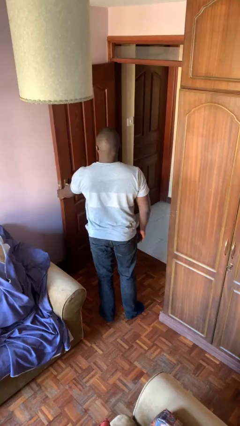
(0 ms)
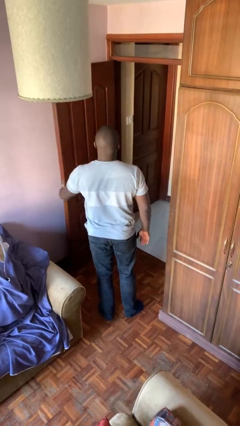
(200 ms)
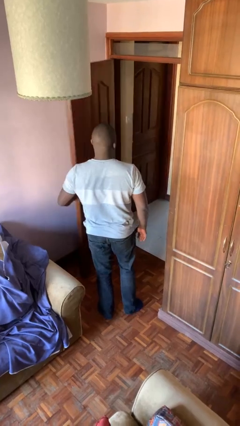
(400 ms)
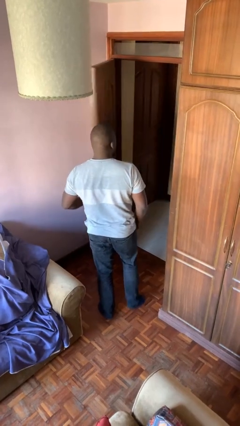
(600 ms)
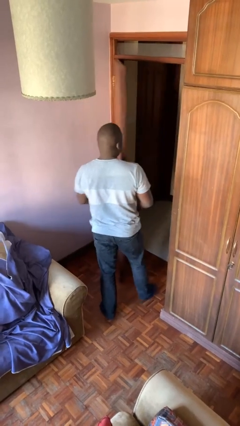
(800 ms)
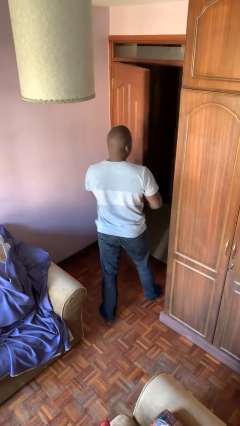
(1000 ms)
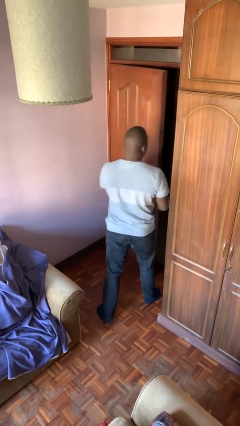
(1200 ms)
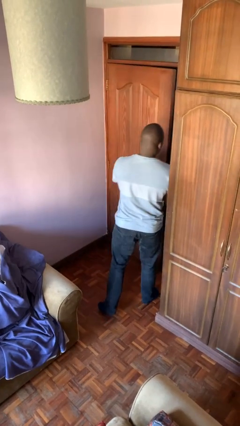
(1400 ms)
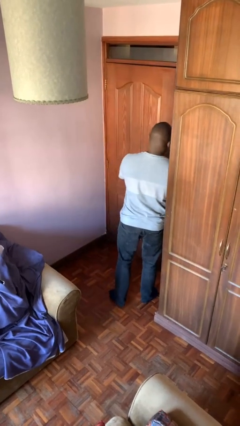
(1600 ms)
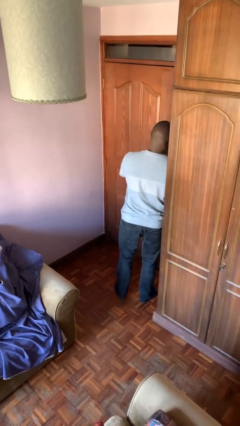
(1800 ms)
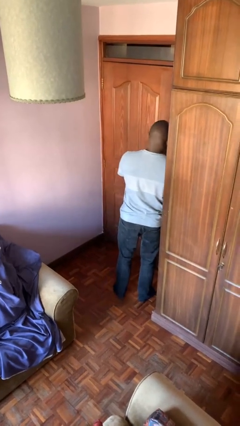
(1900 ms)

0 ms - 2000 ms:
person closes facility door

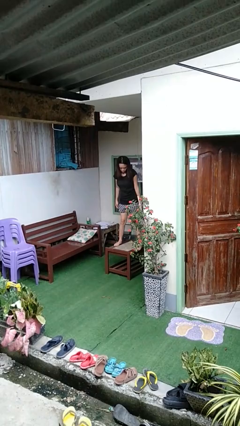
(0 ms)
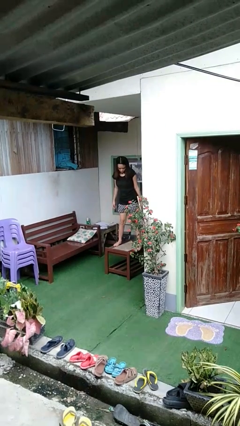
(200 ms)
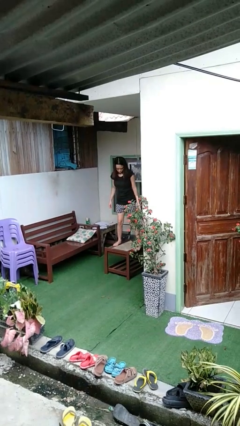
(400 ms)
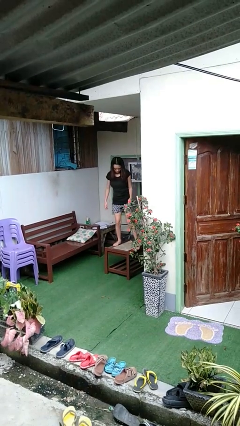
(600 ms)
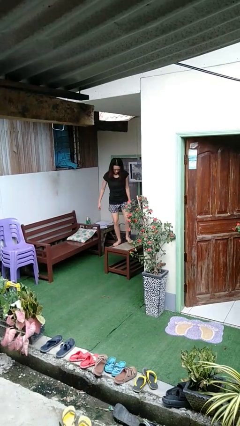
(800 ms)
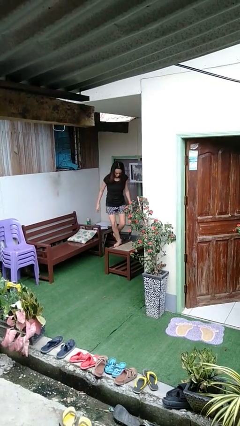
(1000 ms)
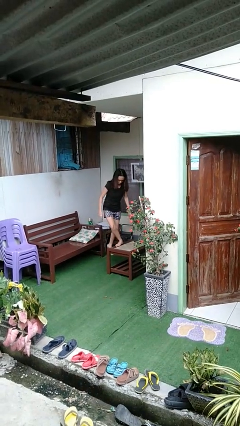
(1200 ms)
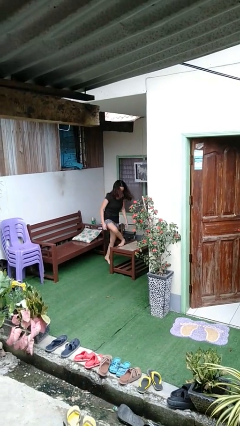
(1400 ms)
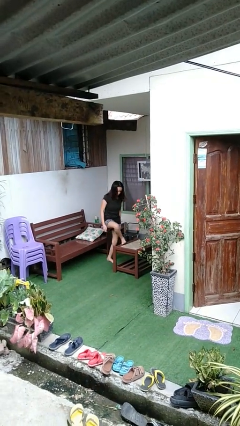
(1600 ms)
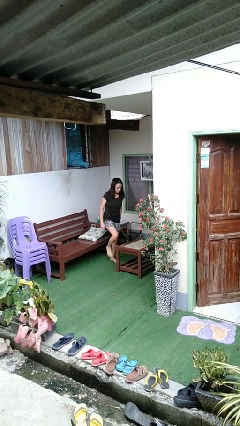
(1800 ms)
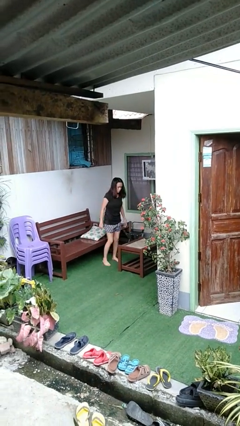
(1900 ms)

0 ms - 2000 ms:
person climbs off table

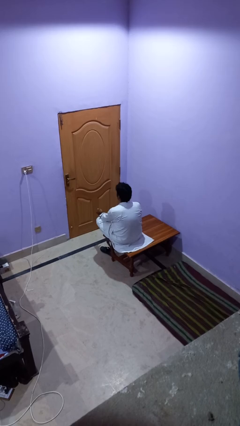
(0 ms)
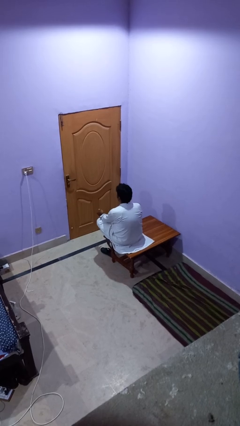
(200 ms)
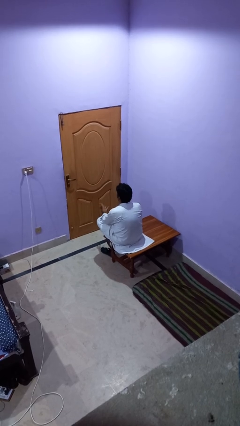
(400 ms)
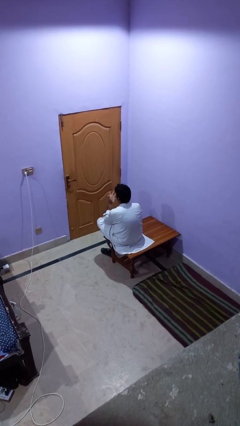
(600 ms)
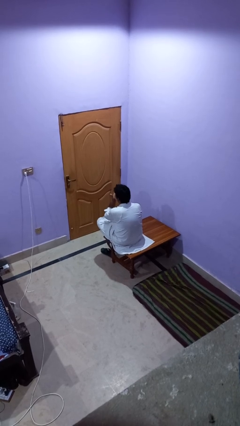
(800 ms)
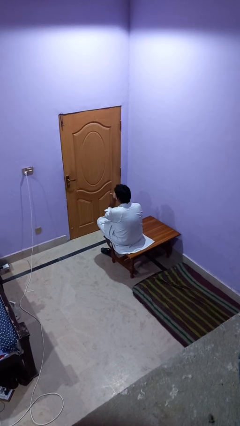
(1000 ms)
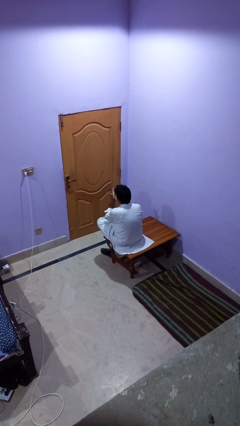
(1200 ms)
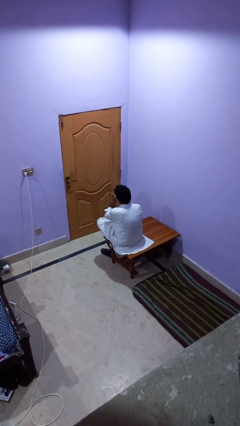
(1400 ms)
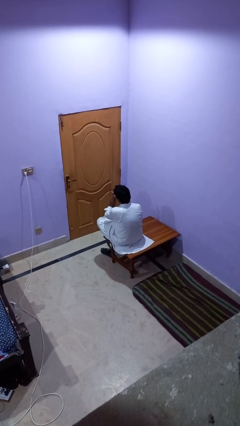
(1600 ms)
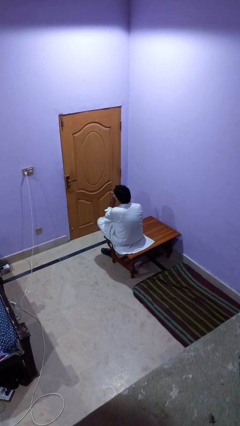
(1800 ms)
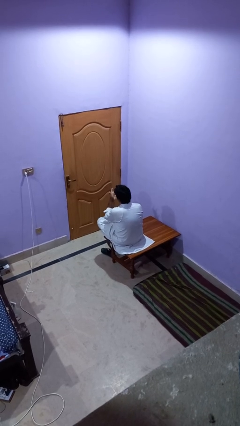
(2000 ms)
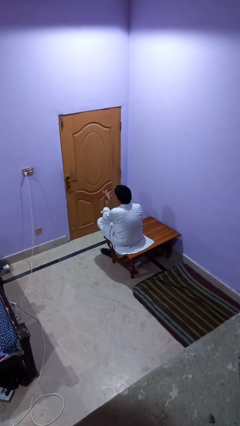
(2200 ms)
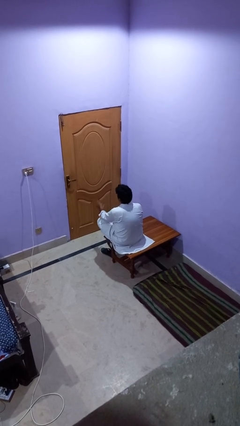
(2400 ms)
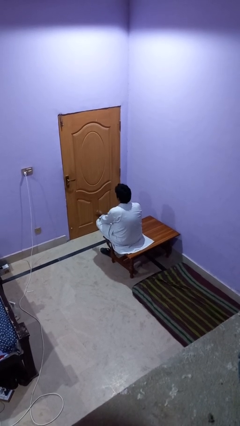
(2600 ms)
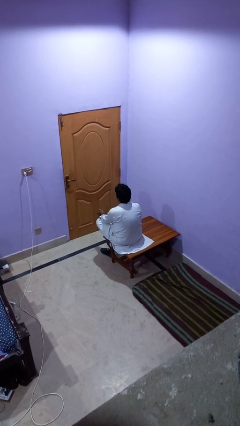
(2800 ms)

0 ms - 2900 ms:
person licks fingers

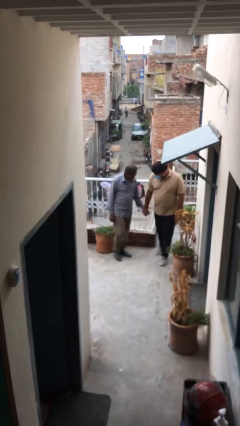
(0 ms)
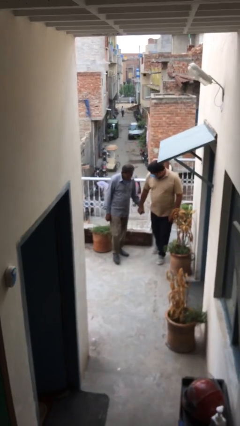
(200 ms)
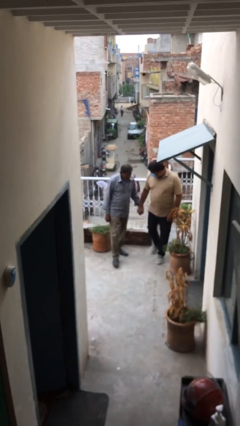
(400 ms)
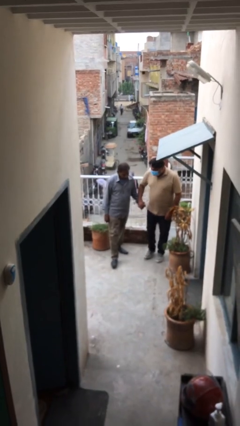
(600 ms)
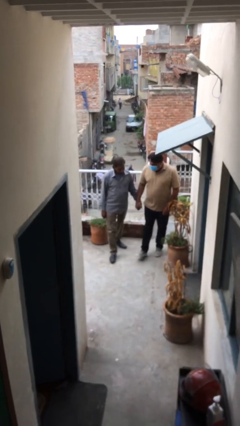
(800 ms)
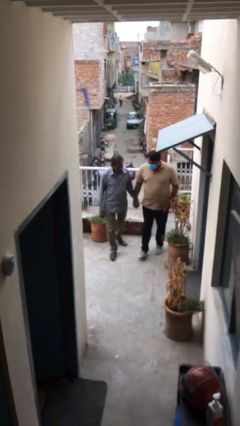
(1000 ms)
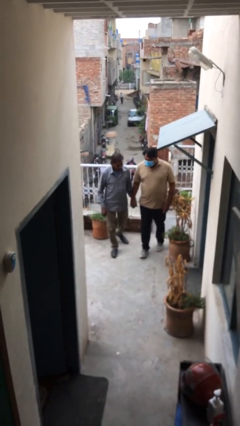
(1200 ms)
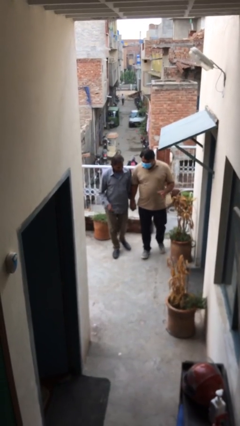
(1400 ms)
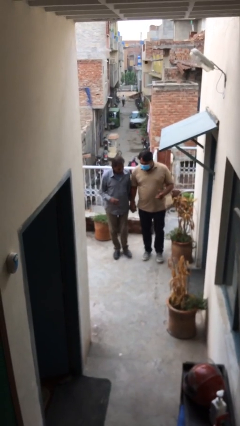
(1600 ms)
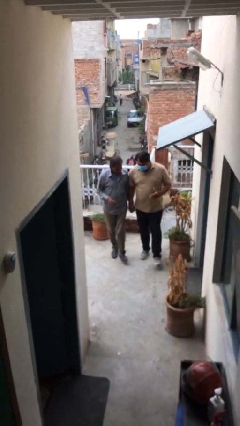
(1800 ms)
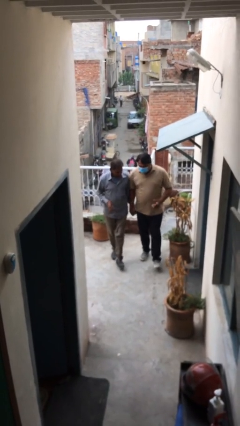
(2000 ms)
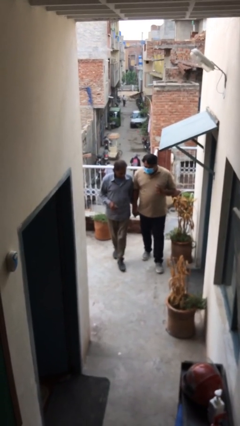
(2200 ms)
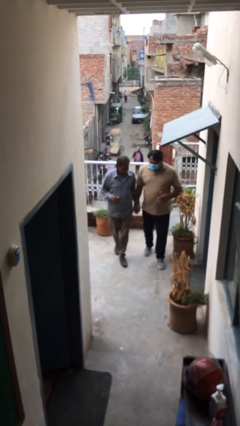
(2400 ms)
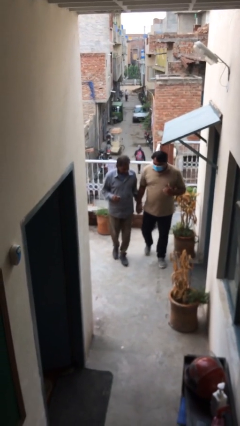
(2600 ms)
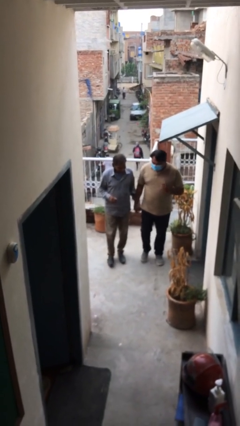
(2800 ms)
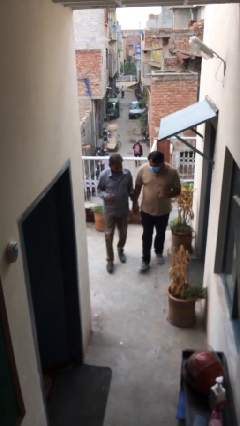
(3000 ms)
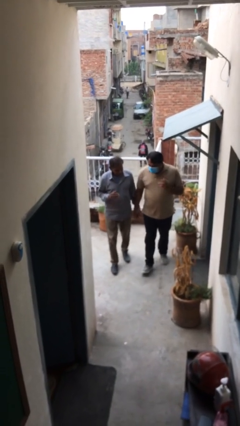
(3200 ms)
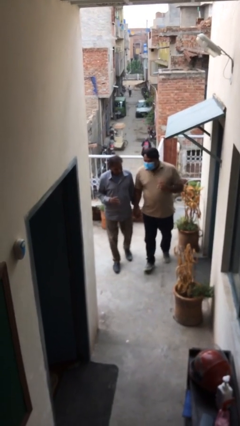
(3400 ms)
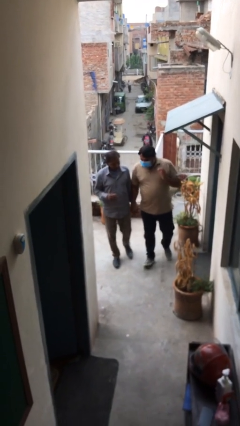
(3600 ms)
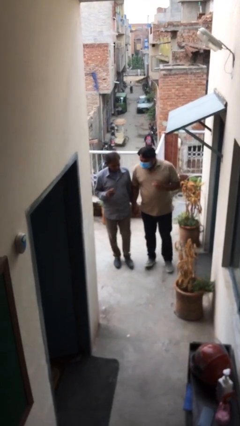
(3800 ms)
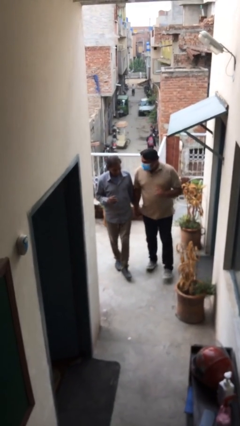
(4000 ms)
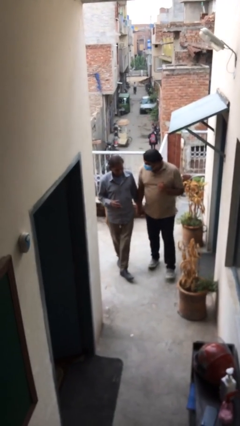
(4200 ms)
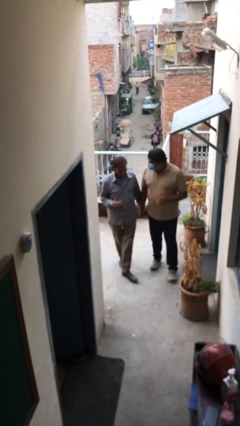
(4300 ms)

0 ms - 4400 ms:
person holds hand

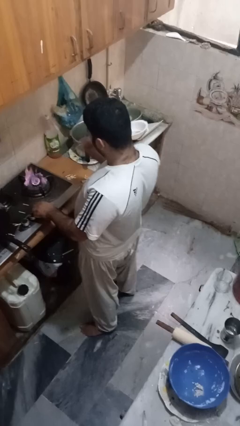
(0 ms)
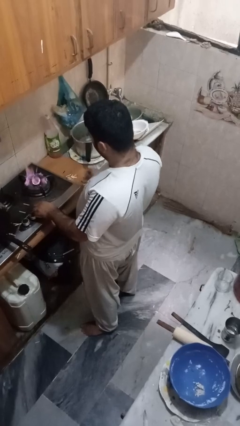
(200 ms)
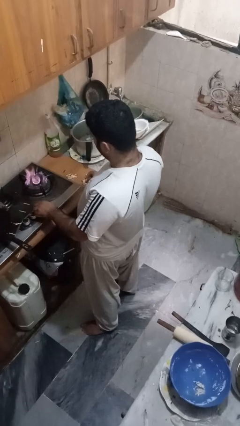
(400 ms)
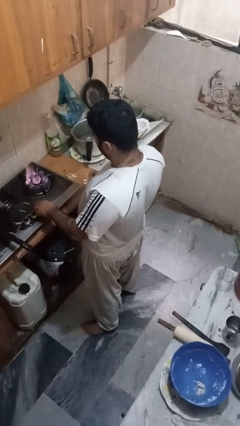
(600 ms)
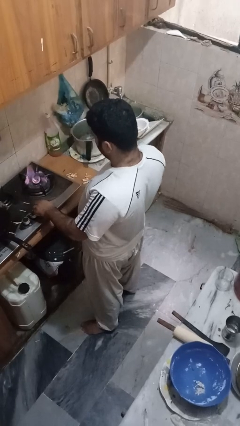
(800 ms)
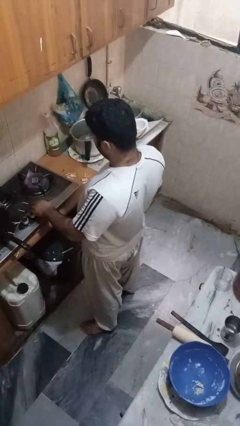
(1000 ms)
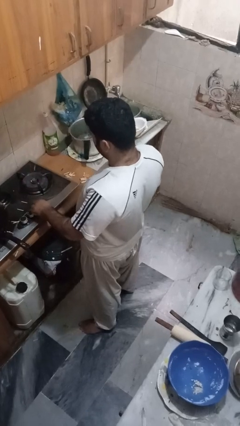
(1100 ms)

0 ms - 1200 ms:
person turns off stovetop

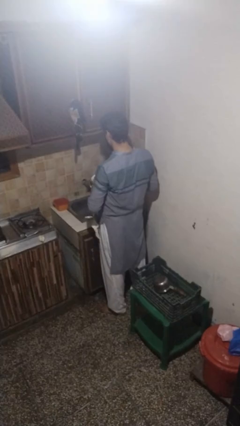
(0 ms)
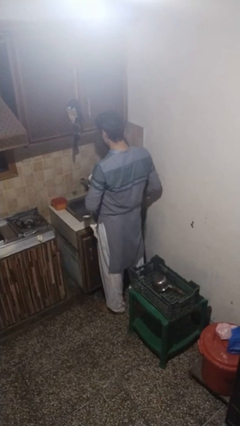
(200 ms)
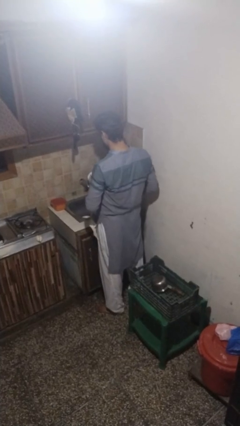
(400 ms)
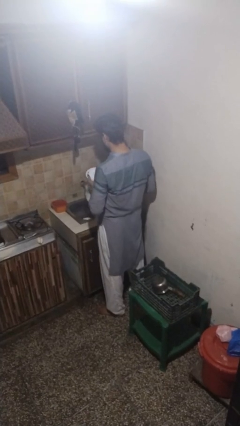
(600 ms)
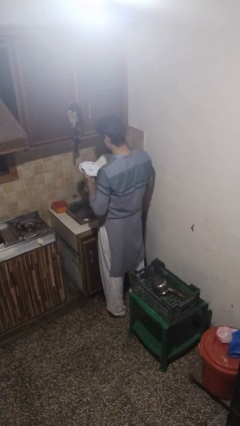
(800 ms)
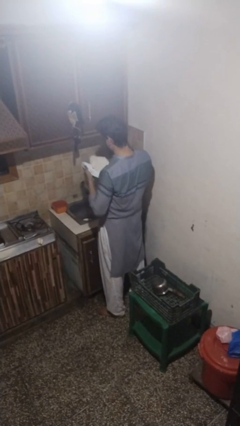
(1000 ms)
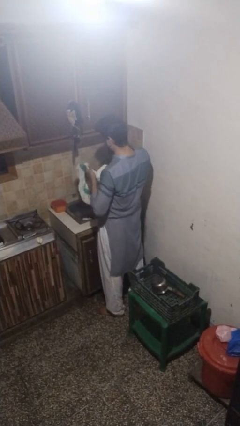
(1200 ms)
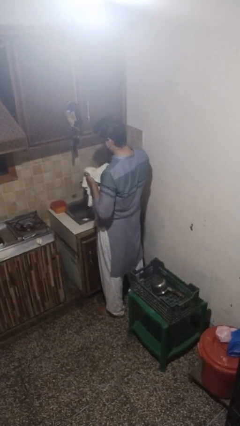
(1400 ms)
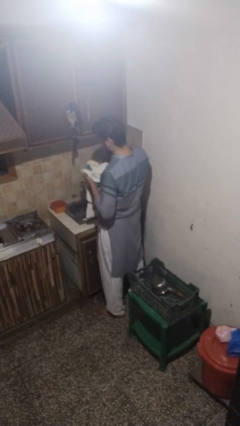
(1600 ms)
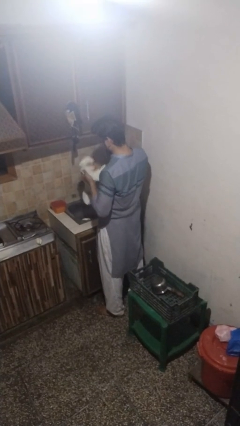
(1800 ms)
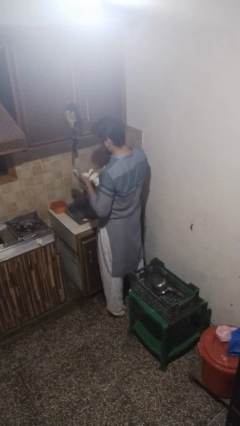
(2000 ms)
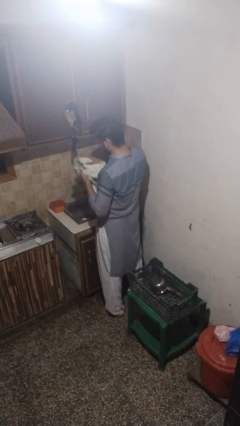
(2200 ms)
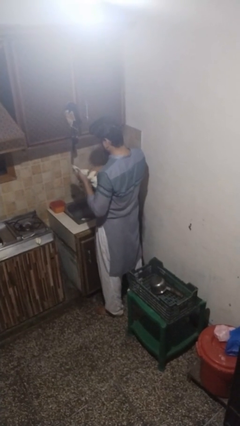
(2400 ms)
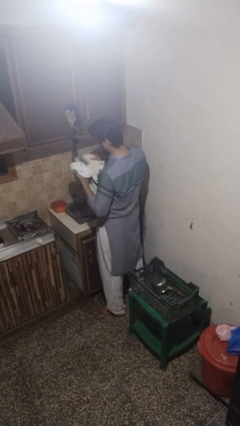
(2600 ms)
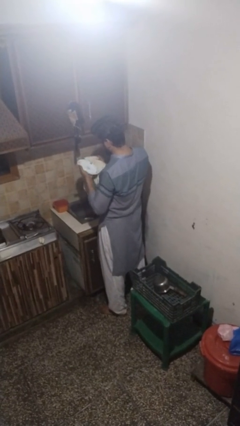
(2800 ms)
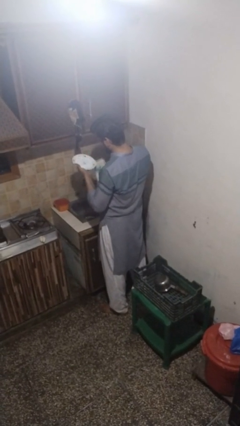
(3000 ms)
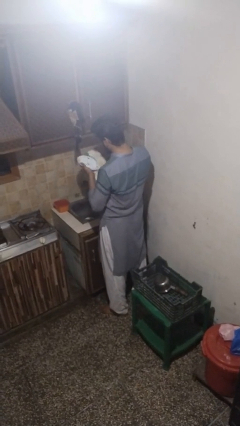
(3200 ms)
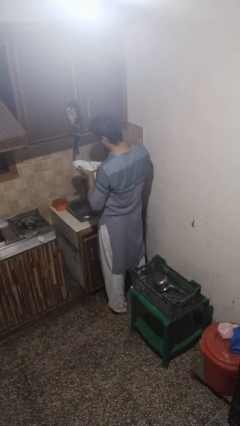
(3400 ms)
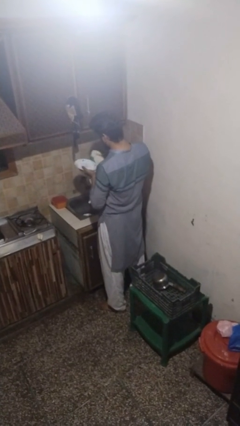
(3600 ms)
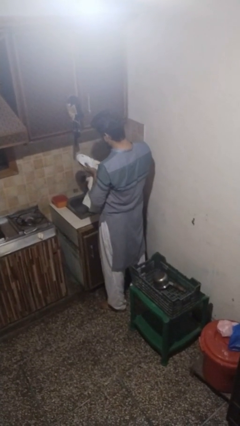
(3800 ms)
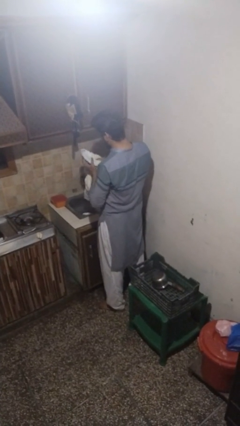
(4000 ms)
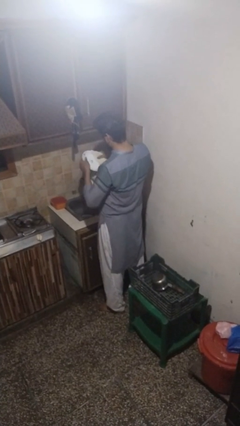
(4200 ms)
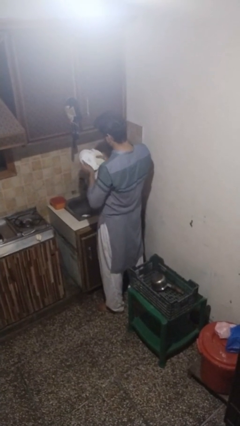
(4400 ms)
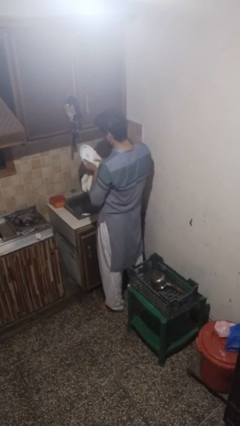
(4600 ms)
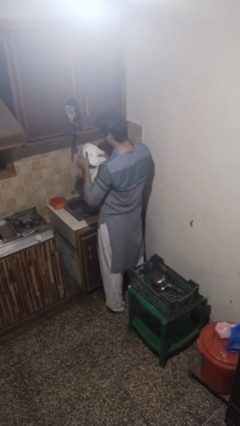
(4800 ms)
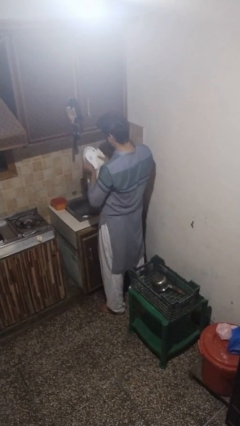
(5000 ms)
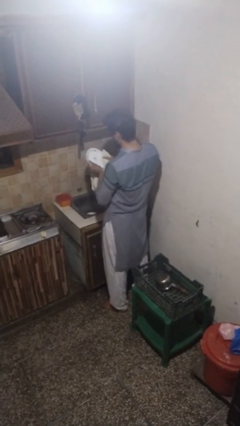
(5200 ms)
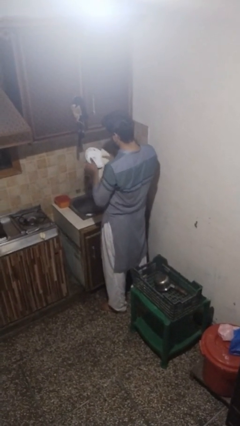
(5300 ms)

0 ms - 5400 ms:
person dries dish
